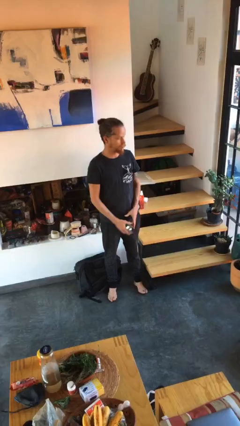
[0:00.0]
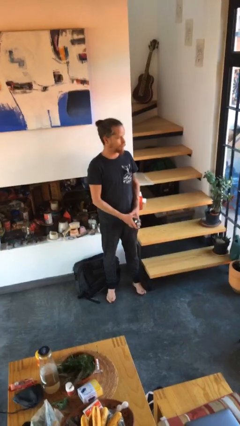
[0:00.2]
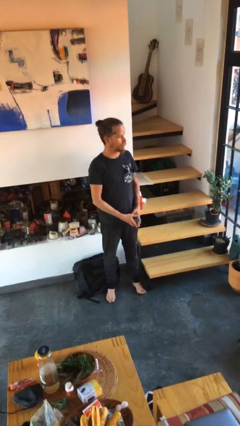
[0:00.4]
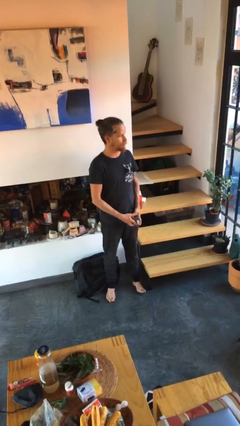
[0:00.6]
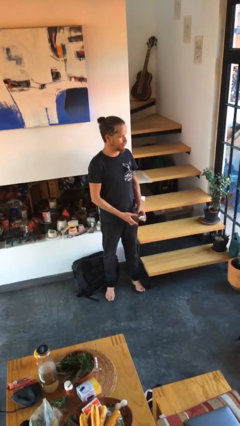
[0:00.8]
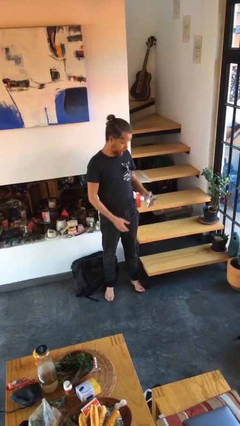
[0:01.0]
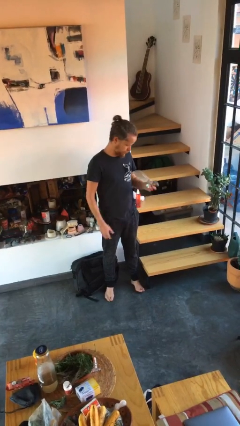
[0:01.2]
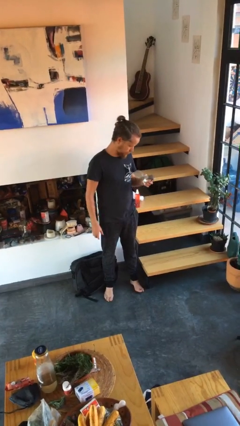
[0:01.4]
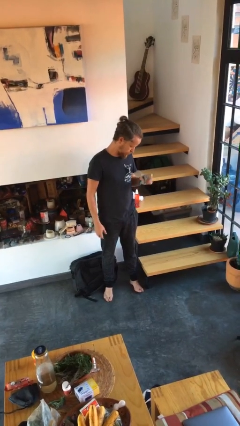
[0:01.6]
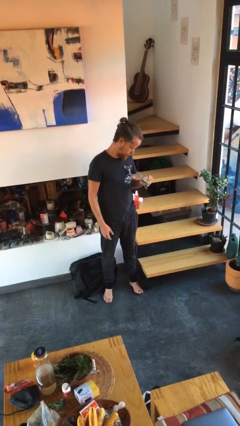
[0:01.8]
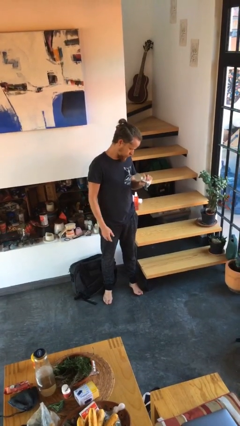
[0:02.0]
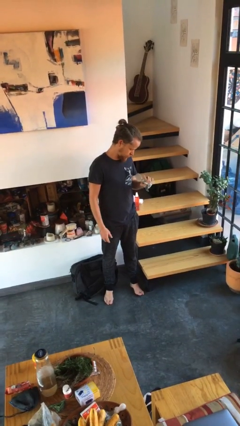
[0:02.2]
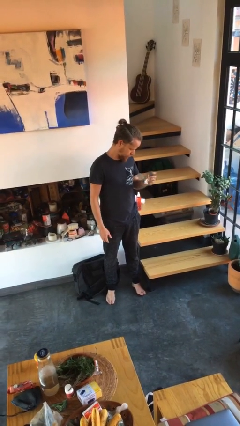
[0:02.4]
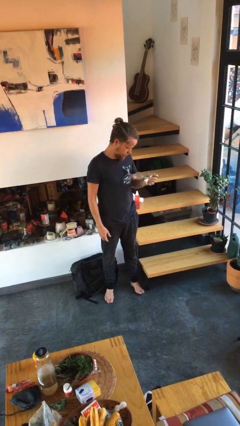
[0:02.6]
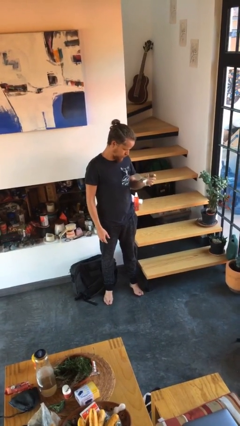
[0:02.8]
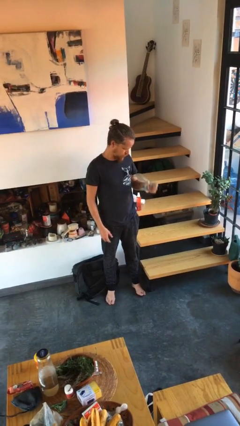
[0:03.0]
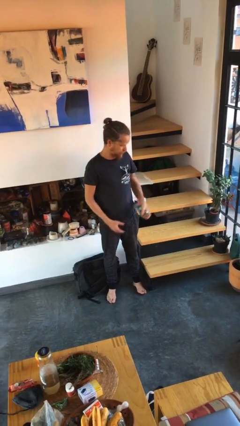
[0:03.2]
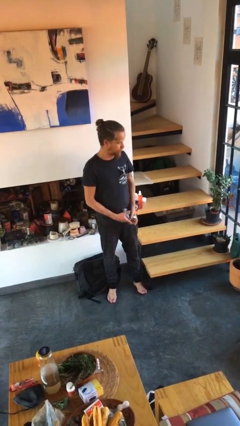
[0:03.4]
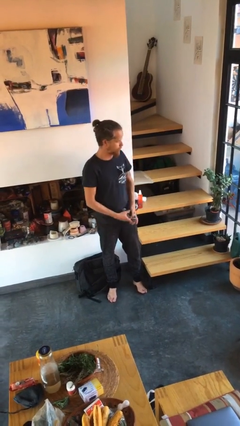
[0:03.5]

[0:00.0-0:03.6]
person squeezes object

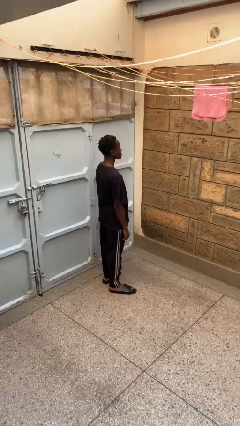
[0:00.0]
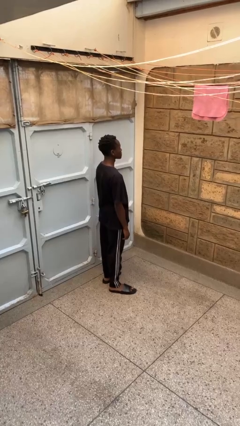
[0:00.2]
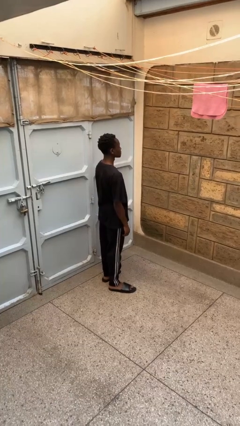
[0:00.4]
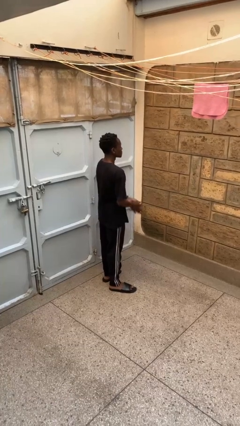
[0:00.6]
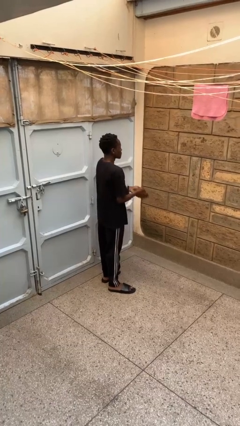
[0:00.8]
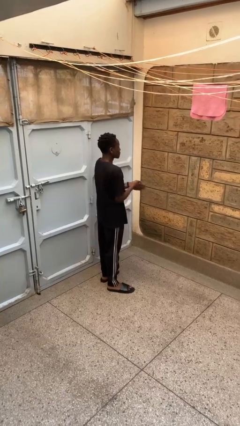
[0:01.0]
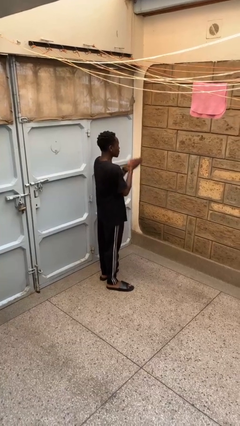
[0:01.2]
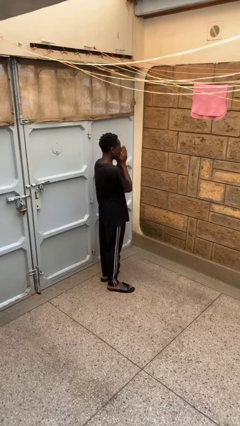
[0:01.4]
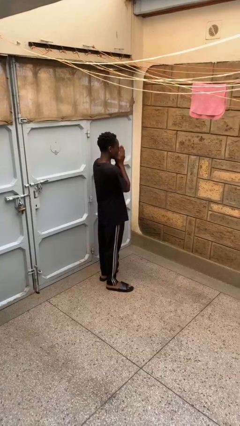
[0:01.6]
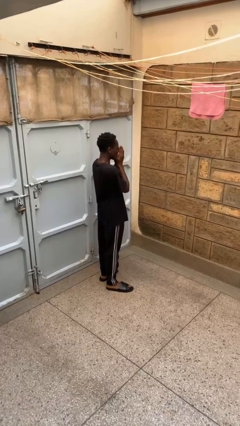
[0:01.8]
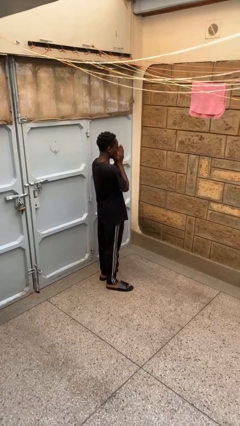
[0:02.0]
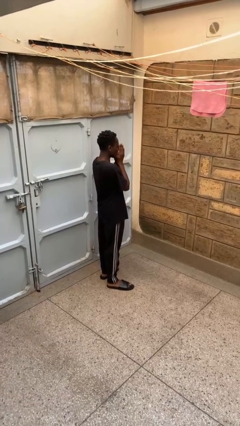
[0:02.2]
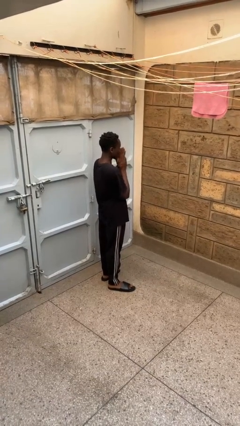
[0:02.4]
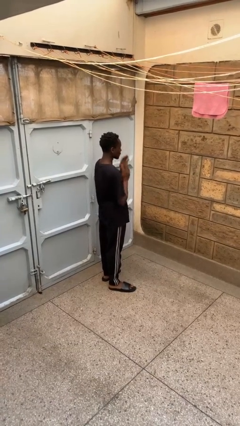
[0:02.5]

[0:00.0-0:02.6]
person blows into hands

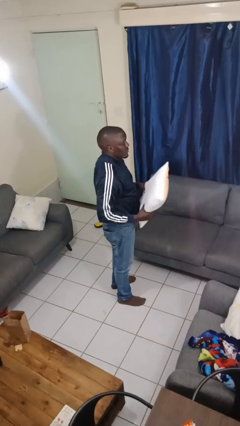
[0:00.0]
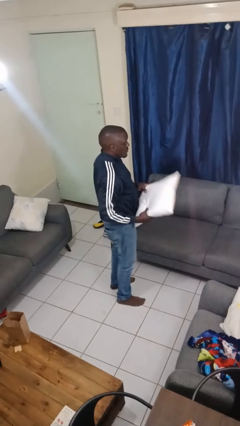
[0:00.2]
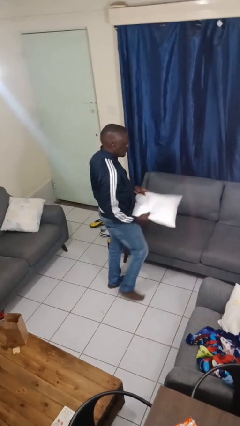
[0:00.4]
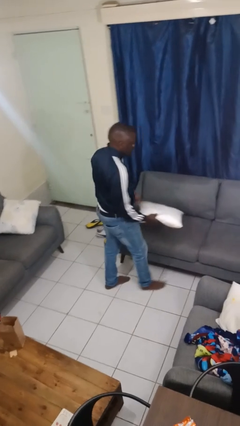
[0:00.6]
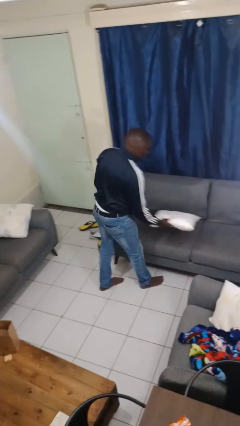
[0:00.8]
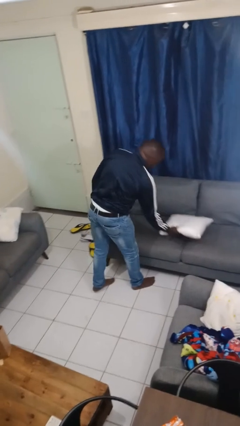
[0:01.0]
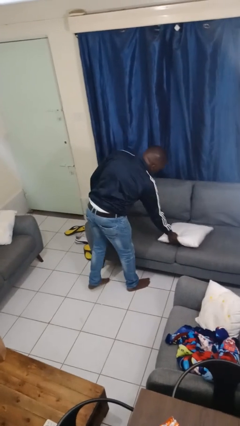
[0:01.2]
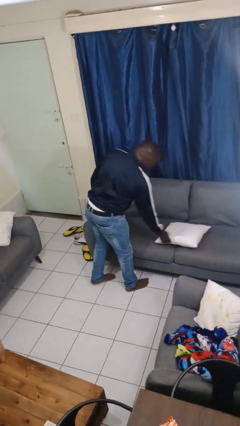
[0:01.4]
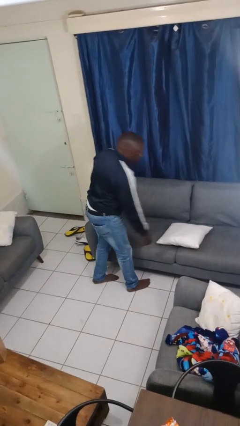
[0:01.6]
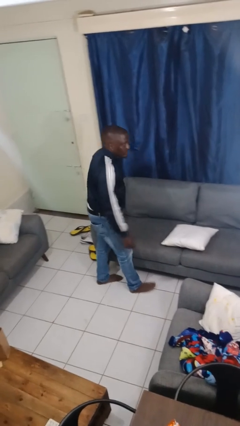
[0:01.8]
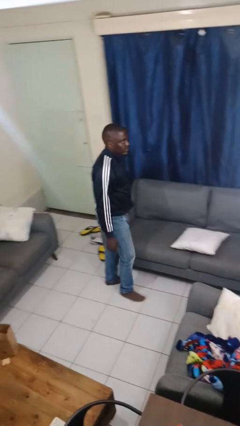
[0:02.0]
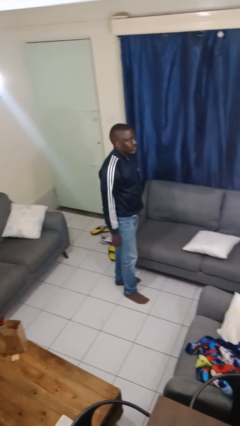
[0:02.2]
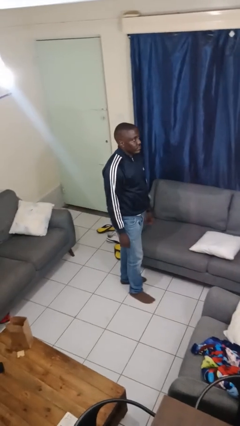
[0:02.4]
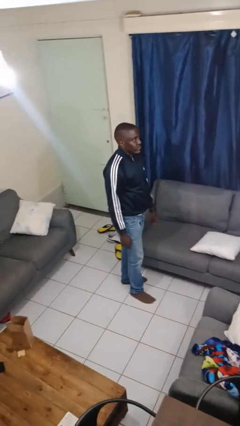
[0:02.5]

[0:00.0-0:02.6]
person puts down object on couch

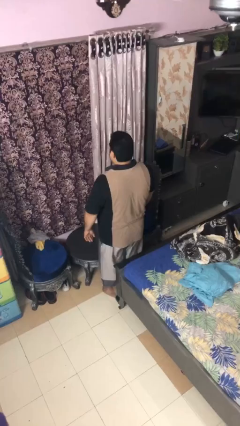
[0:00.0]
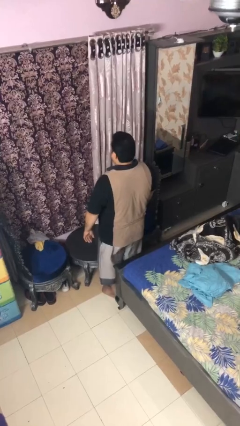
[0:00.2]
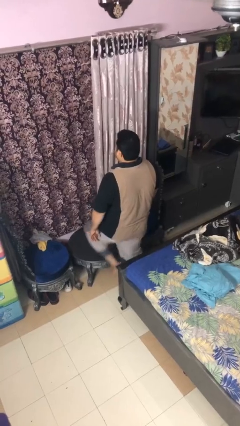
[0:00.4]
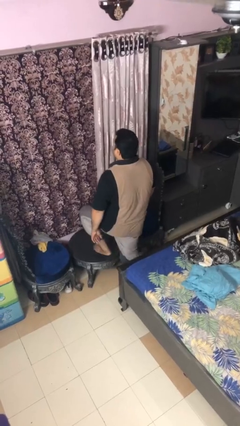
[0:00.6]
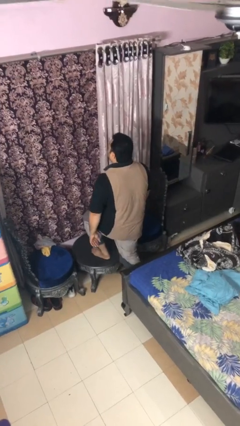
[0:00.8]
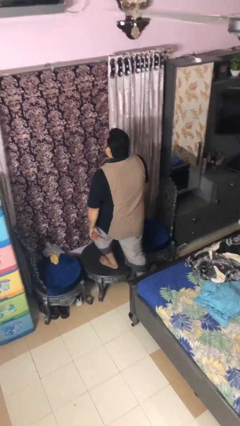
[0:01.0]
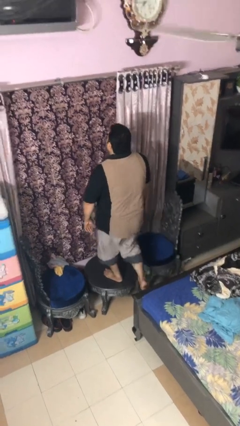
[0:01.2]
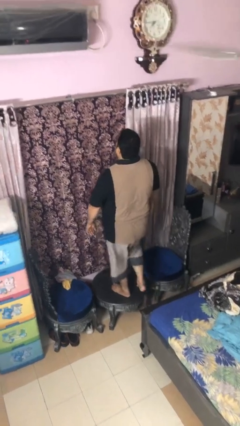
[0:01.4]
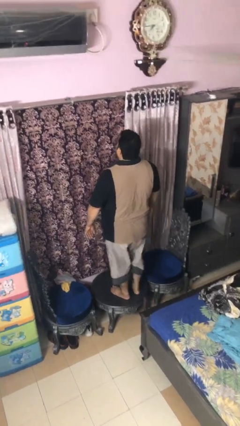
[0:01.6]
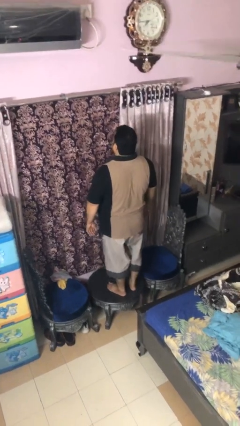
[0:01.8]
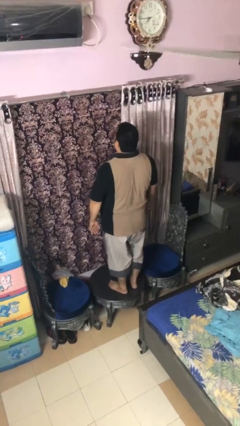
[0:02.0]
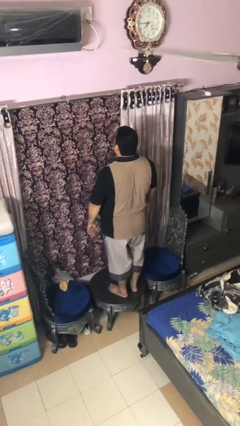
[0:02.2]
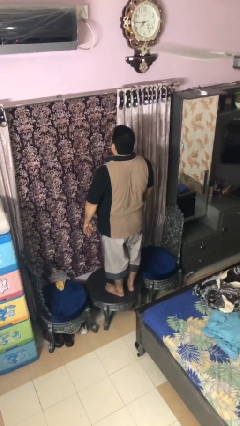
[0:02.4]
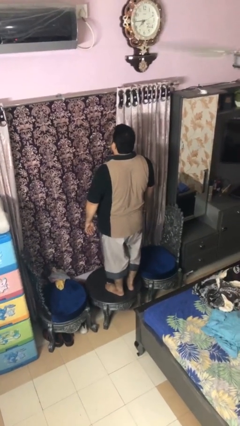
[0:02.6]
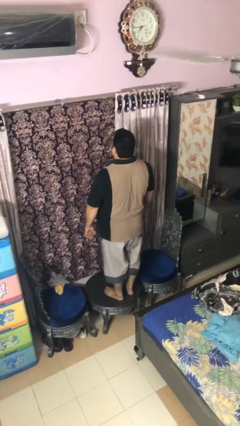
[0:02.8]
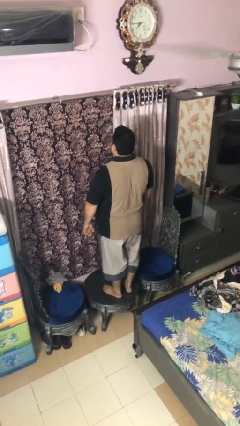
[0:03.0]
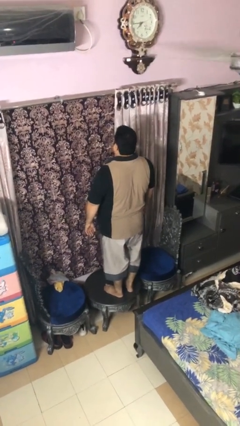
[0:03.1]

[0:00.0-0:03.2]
person climbs on table

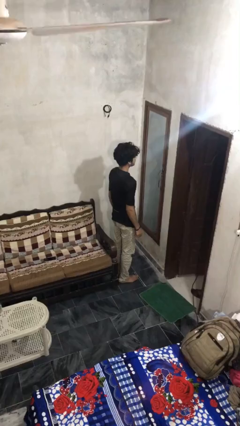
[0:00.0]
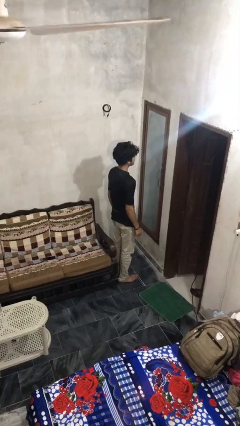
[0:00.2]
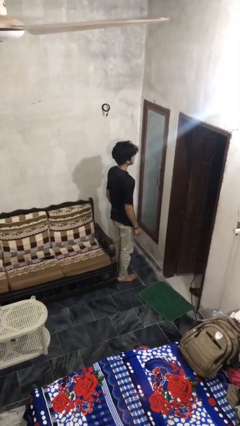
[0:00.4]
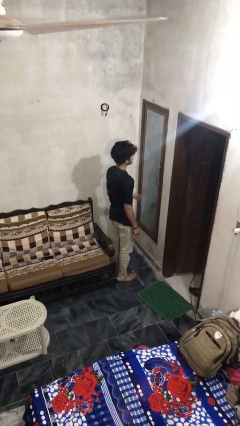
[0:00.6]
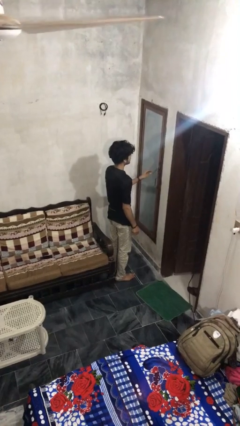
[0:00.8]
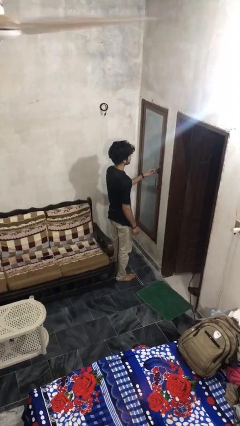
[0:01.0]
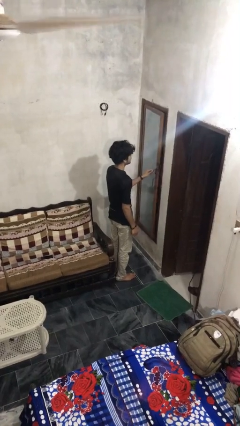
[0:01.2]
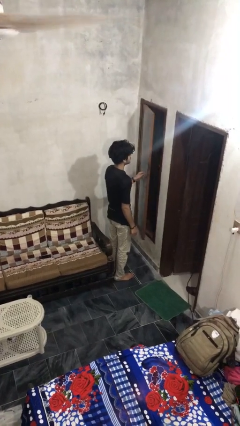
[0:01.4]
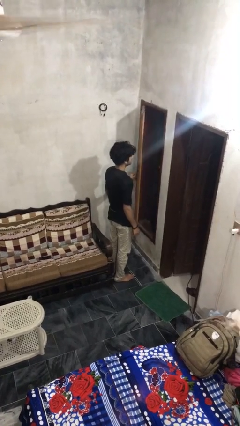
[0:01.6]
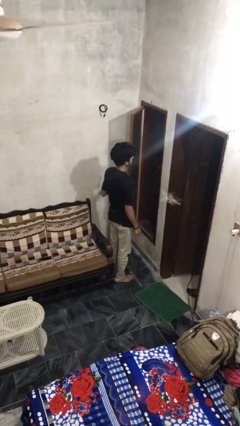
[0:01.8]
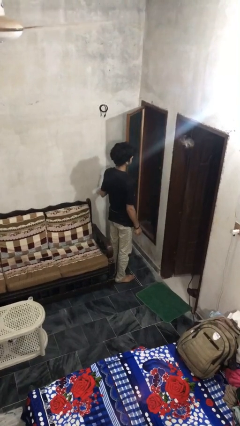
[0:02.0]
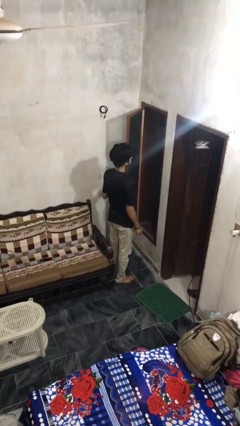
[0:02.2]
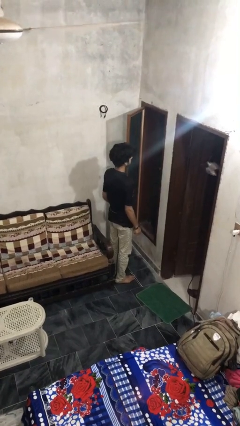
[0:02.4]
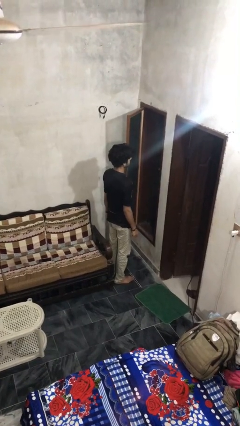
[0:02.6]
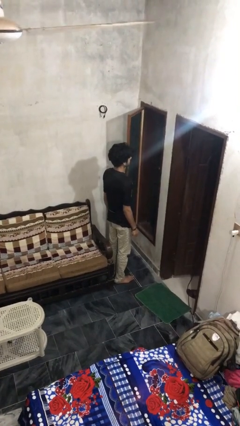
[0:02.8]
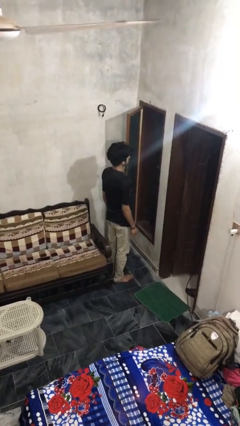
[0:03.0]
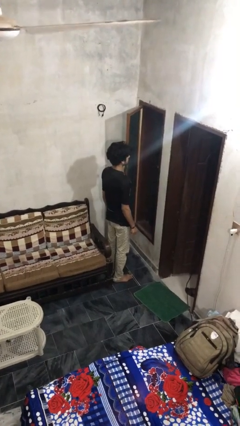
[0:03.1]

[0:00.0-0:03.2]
person opens home window

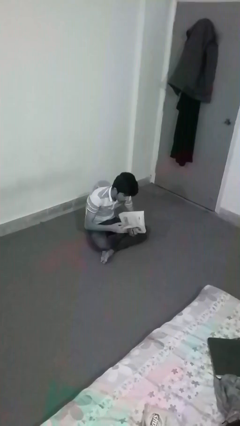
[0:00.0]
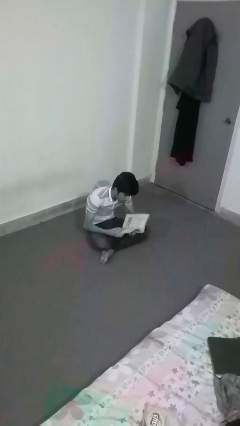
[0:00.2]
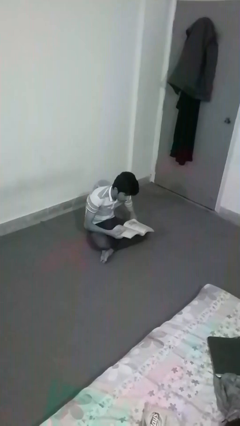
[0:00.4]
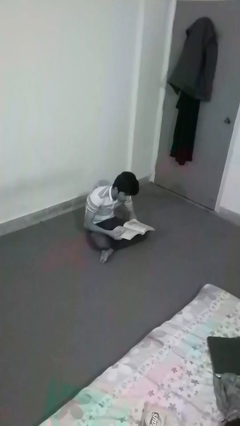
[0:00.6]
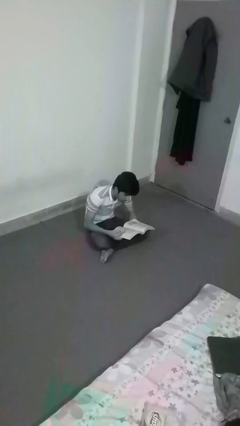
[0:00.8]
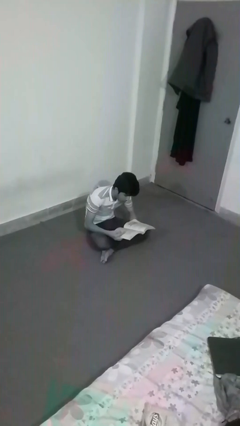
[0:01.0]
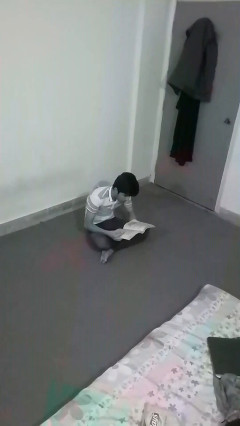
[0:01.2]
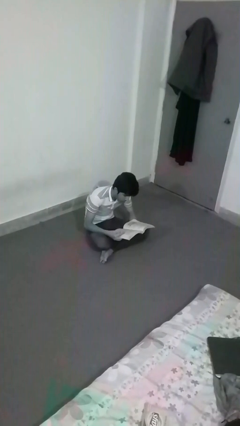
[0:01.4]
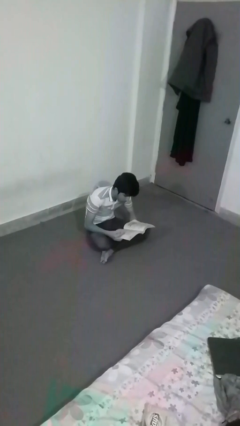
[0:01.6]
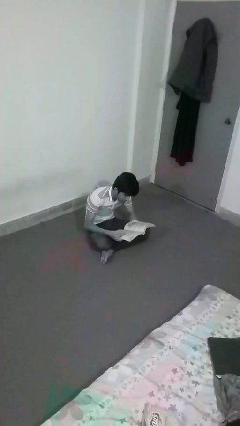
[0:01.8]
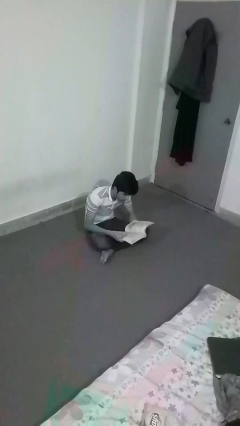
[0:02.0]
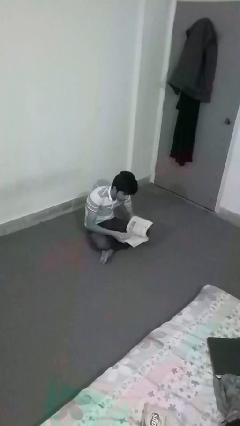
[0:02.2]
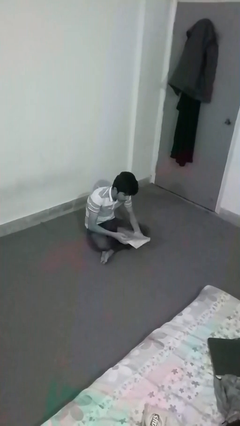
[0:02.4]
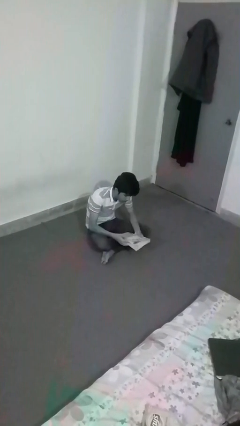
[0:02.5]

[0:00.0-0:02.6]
person reads document
